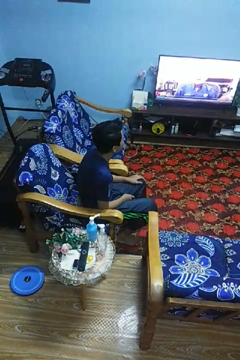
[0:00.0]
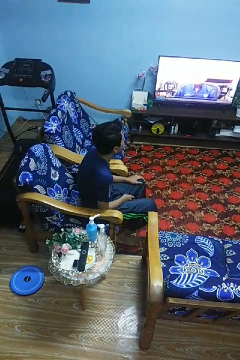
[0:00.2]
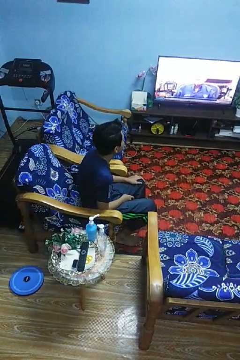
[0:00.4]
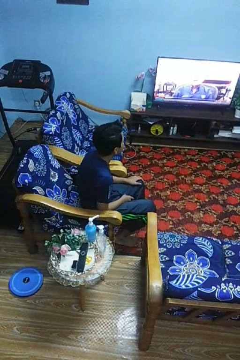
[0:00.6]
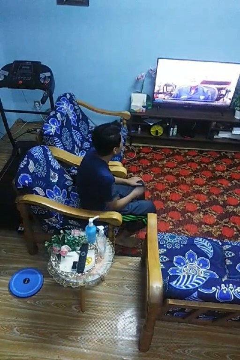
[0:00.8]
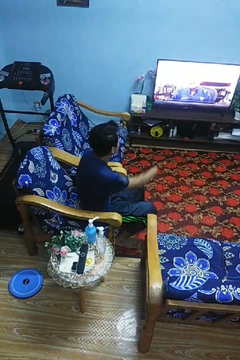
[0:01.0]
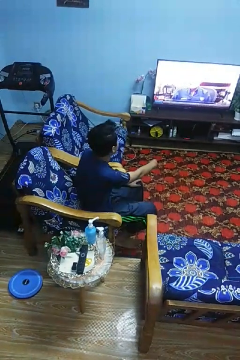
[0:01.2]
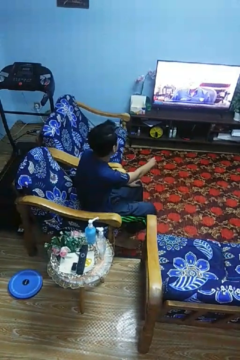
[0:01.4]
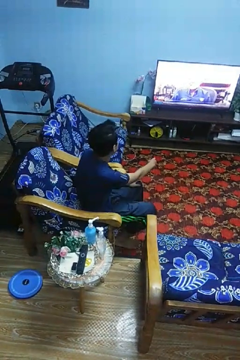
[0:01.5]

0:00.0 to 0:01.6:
person uses television remote

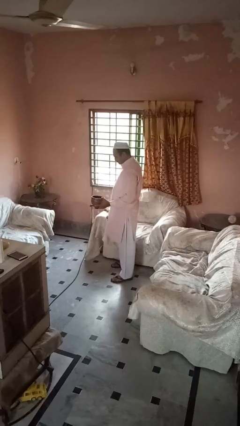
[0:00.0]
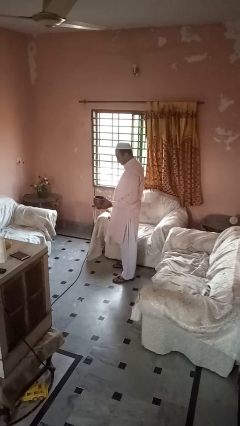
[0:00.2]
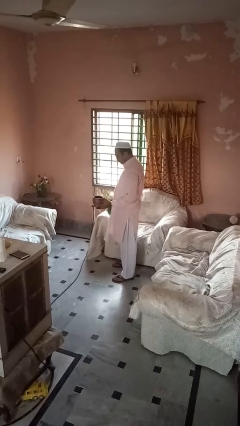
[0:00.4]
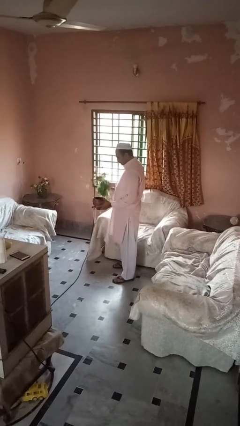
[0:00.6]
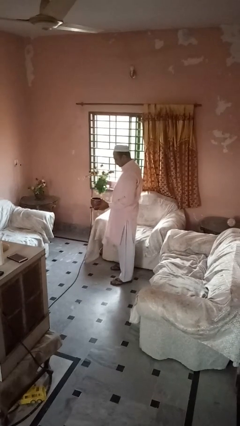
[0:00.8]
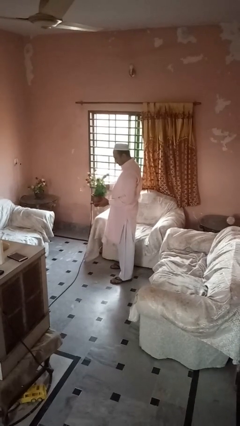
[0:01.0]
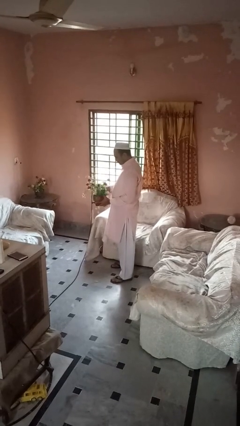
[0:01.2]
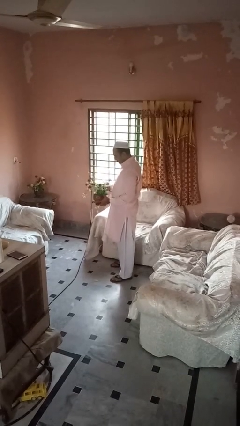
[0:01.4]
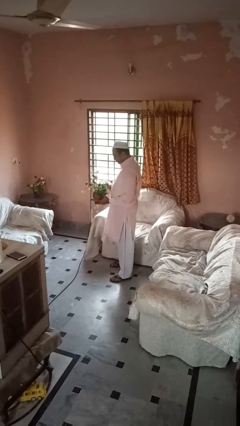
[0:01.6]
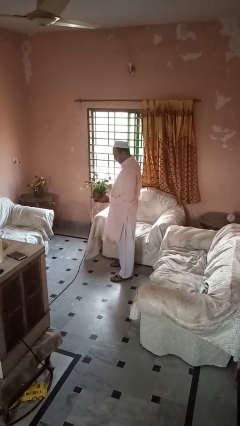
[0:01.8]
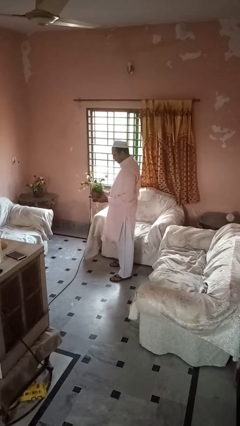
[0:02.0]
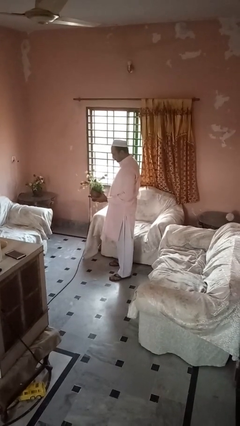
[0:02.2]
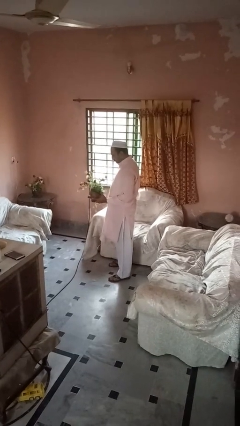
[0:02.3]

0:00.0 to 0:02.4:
person arranges flowers in vase

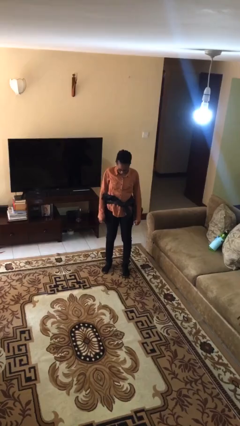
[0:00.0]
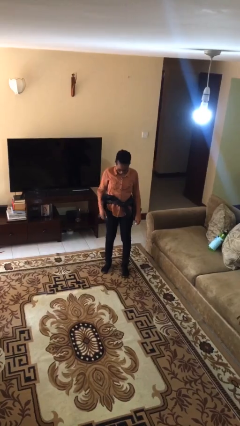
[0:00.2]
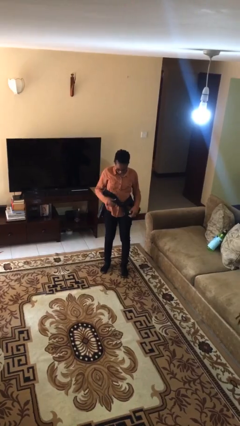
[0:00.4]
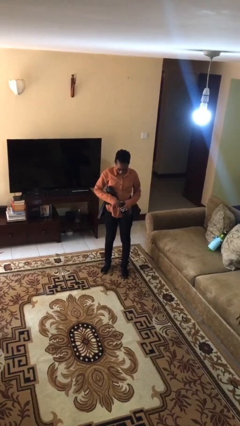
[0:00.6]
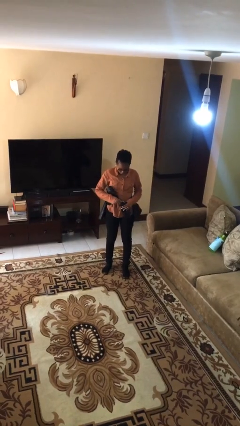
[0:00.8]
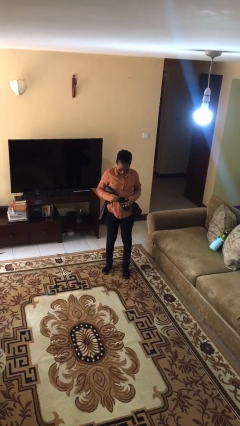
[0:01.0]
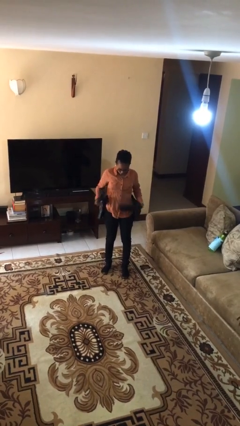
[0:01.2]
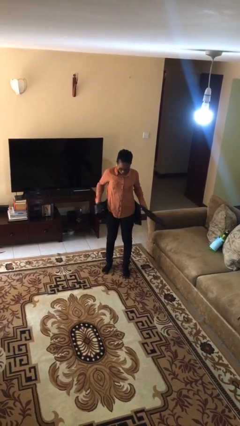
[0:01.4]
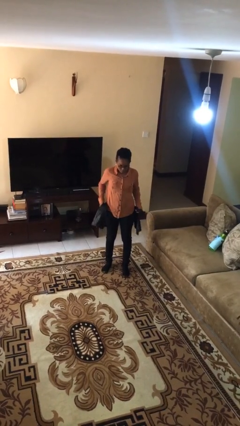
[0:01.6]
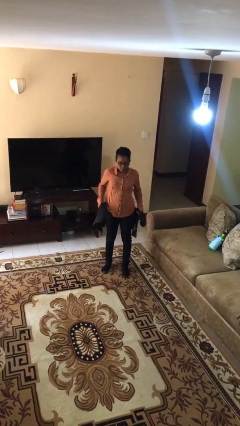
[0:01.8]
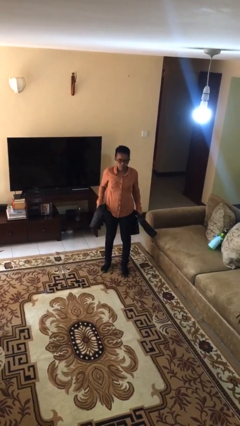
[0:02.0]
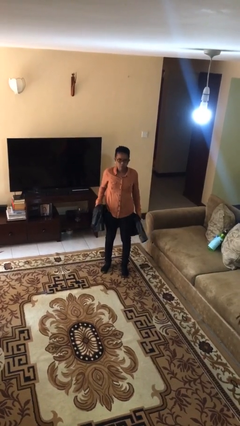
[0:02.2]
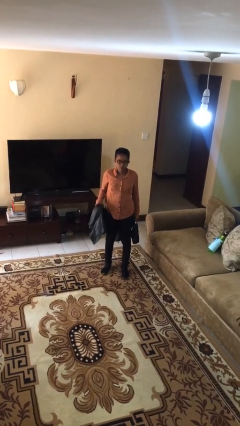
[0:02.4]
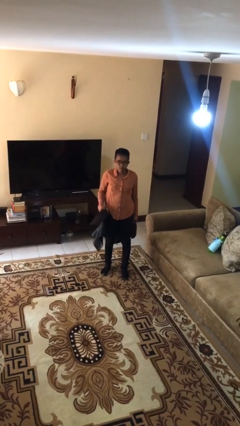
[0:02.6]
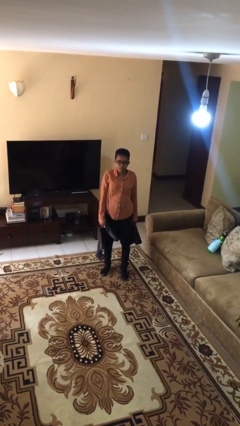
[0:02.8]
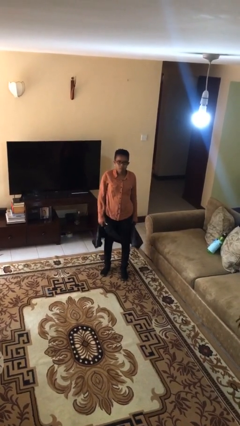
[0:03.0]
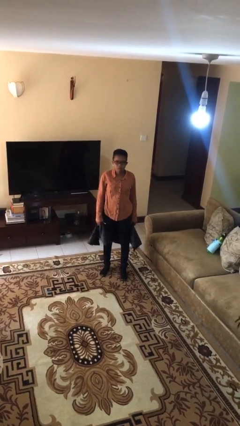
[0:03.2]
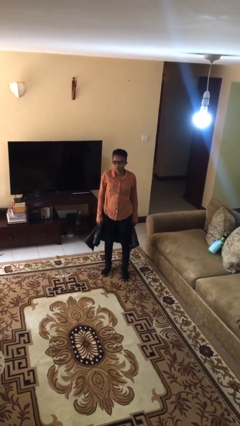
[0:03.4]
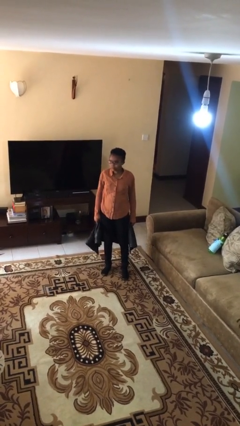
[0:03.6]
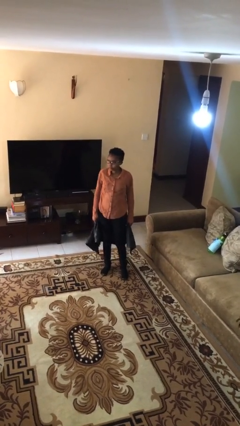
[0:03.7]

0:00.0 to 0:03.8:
person unties jacket around waist

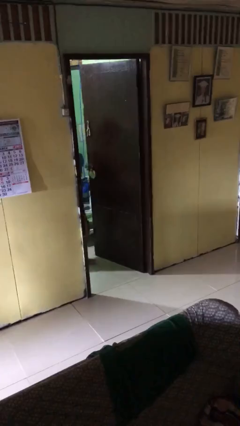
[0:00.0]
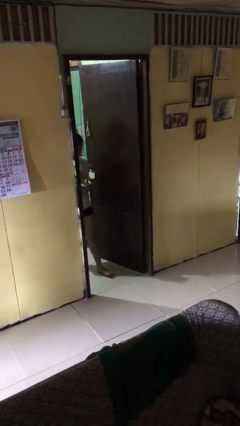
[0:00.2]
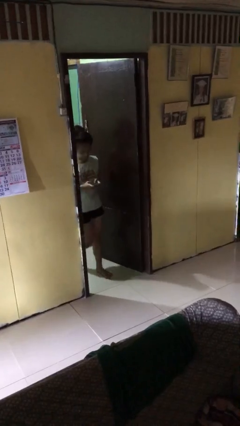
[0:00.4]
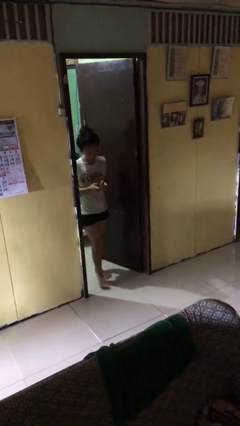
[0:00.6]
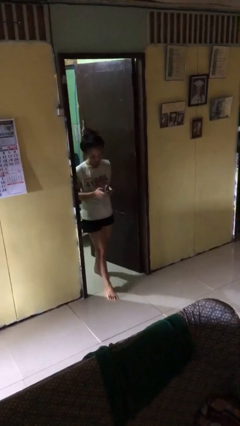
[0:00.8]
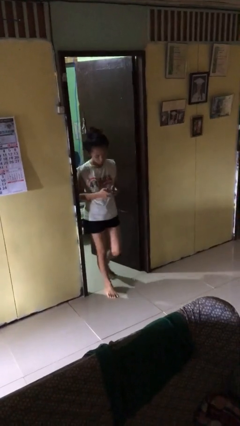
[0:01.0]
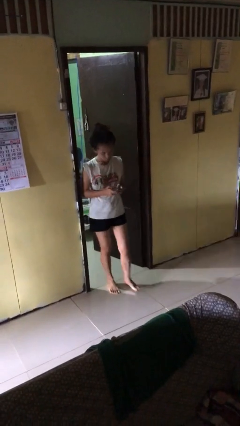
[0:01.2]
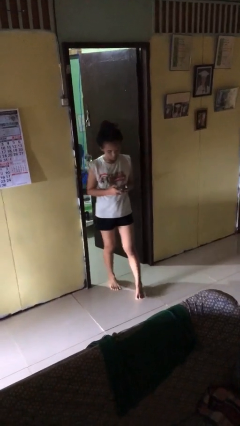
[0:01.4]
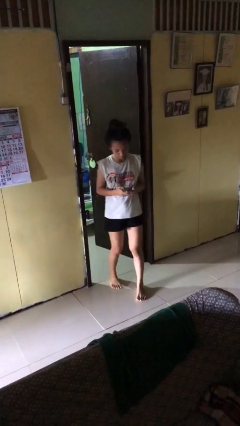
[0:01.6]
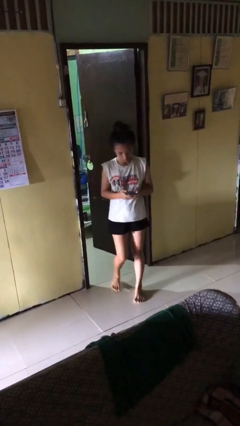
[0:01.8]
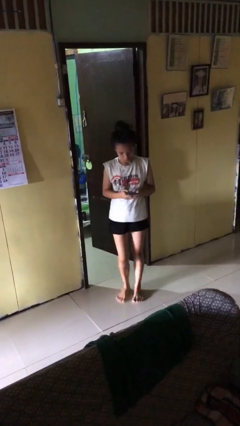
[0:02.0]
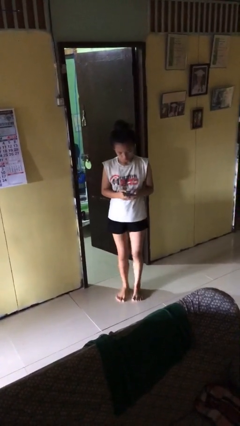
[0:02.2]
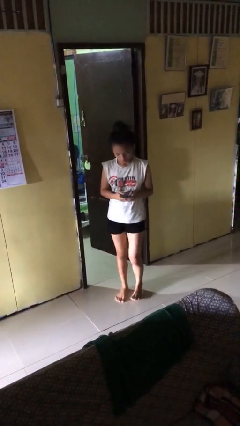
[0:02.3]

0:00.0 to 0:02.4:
person enters scene through structure

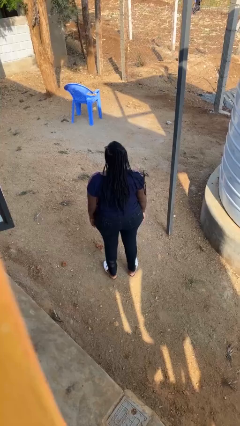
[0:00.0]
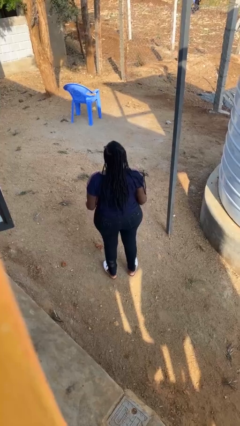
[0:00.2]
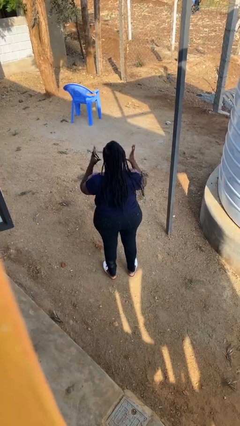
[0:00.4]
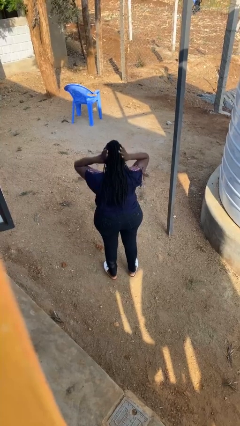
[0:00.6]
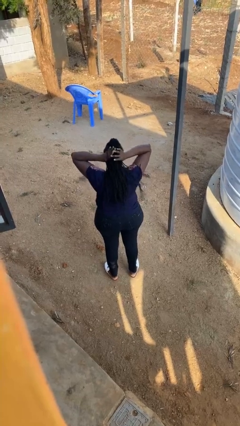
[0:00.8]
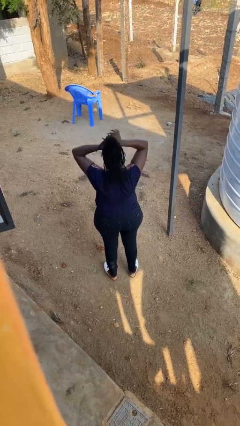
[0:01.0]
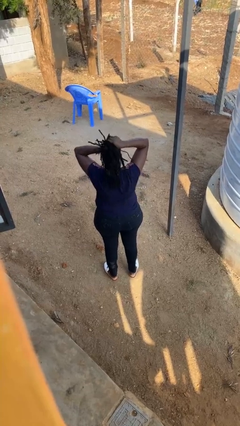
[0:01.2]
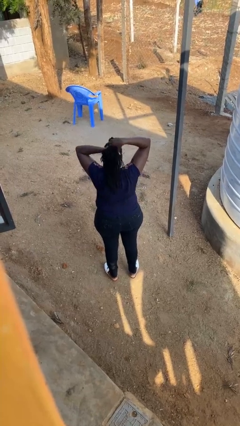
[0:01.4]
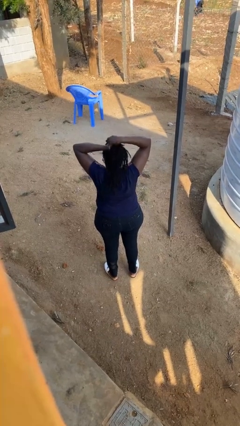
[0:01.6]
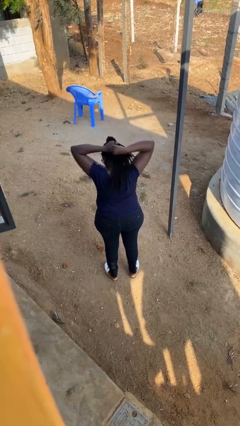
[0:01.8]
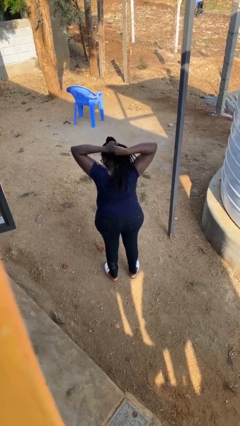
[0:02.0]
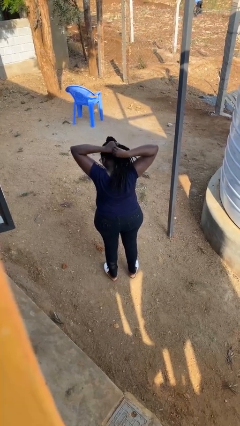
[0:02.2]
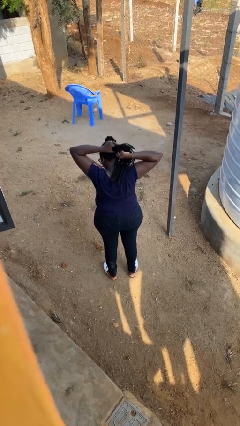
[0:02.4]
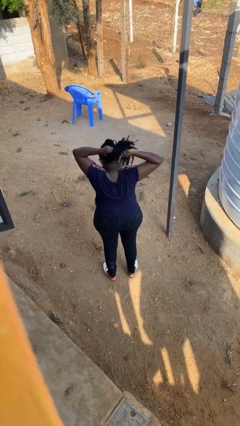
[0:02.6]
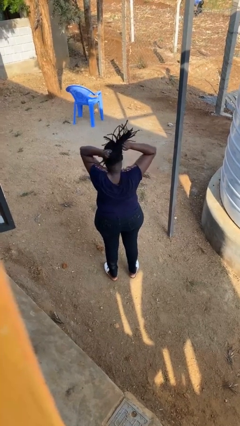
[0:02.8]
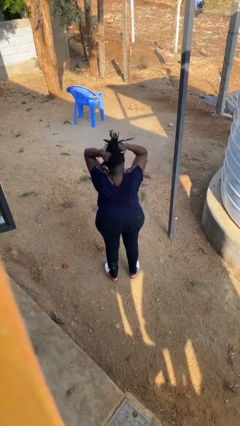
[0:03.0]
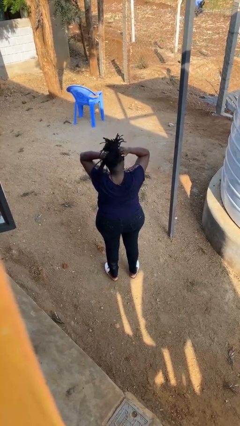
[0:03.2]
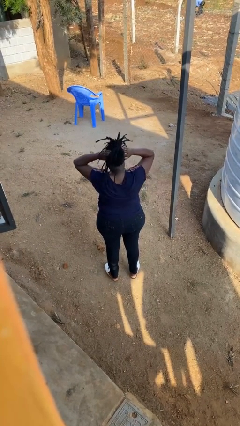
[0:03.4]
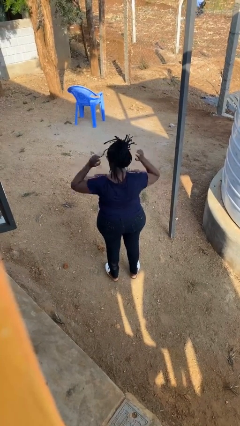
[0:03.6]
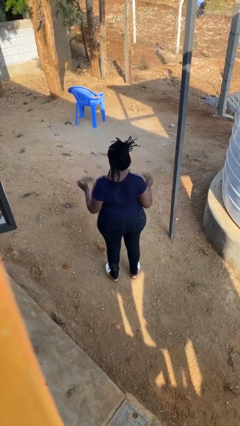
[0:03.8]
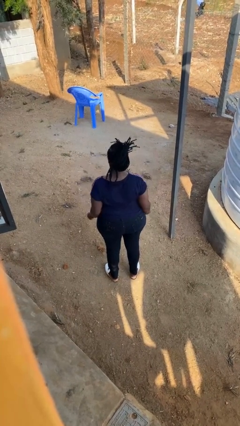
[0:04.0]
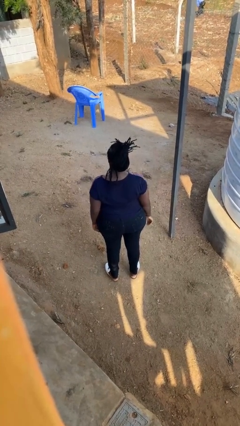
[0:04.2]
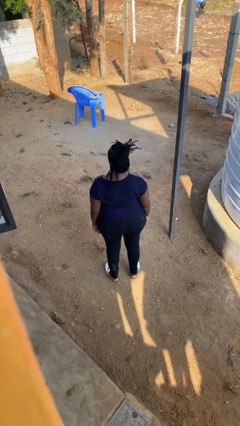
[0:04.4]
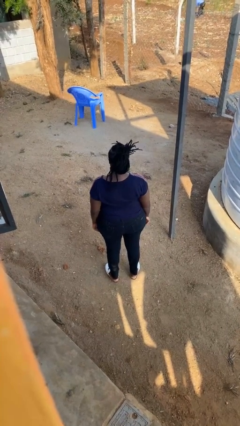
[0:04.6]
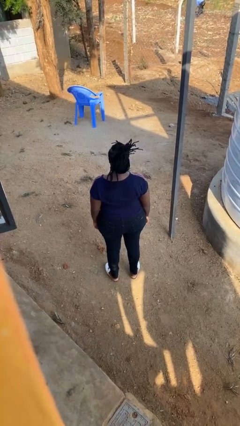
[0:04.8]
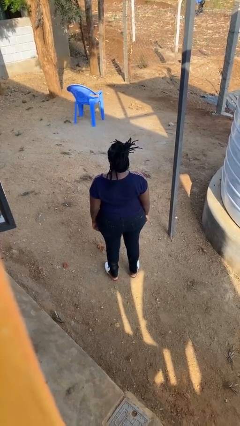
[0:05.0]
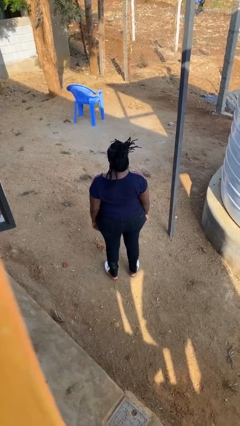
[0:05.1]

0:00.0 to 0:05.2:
person puts hair in ponytail

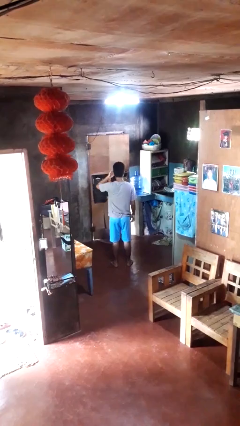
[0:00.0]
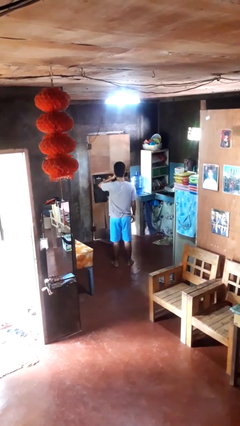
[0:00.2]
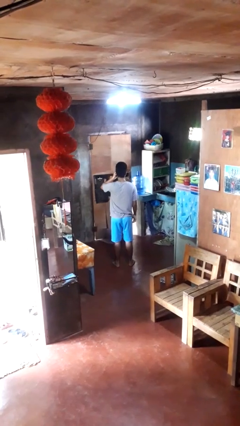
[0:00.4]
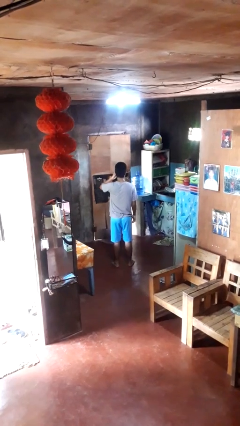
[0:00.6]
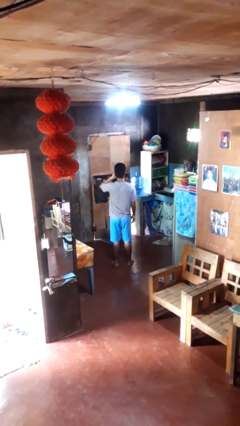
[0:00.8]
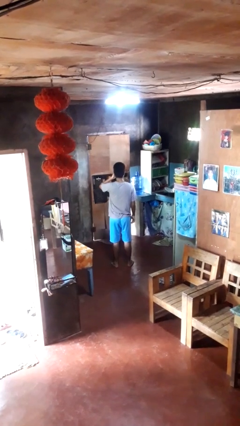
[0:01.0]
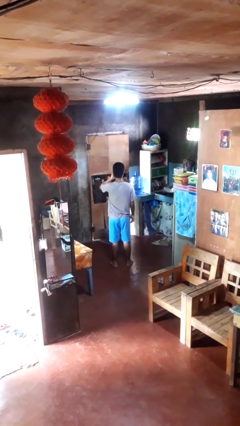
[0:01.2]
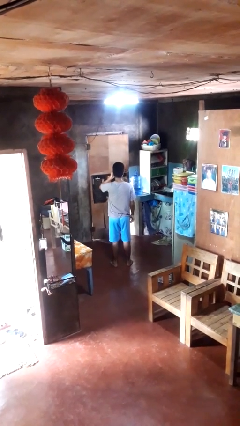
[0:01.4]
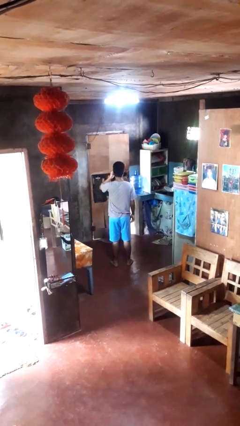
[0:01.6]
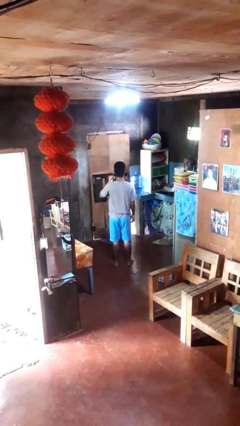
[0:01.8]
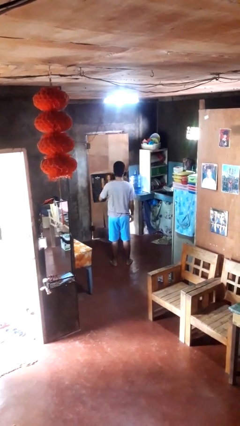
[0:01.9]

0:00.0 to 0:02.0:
person rubs eyes
